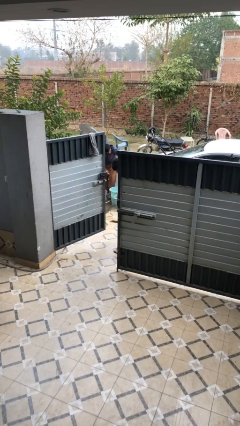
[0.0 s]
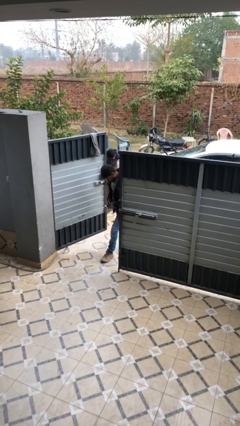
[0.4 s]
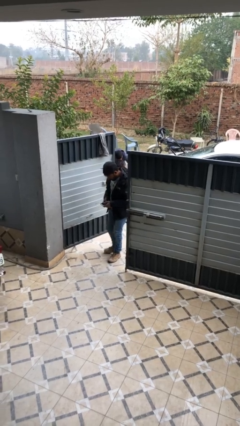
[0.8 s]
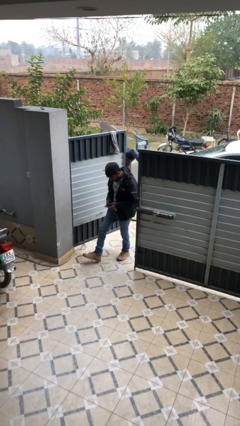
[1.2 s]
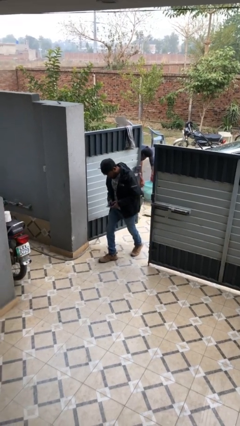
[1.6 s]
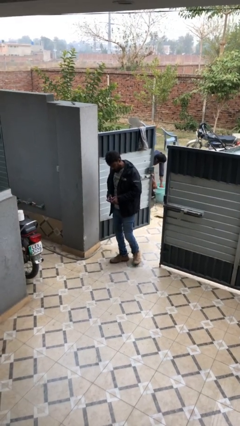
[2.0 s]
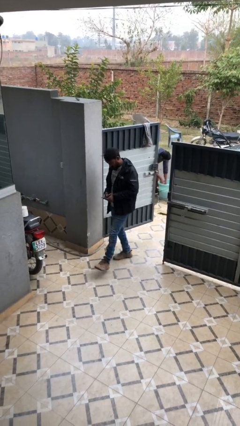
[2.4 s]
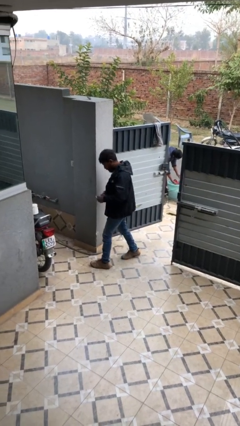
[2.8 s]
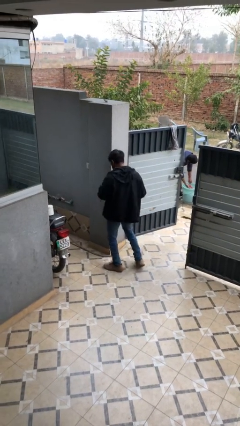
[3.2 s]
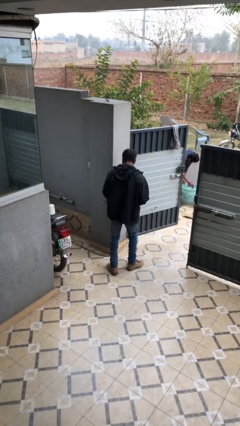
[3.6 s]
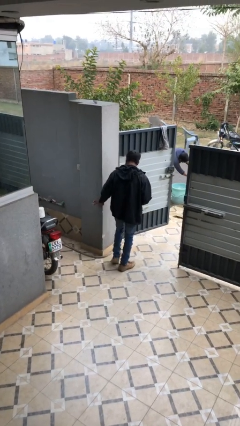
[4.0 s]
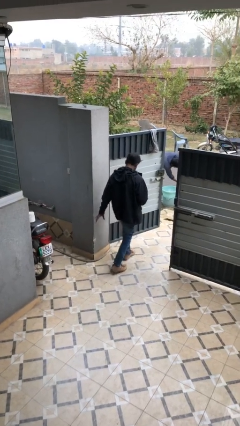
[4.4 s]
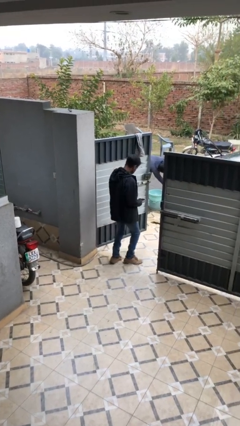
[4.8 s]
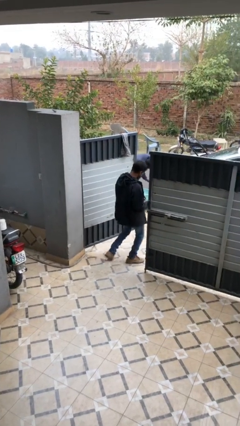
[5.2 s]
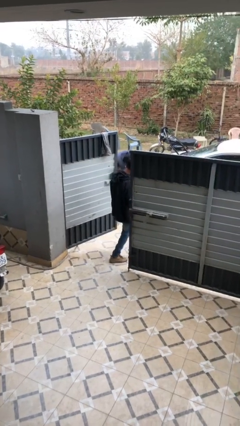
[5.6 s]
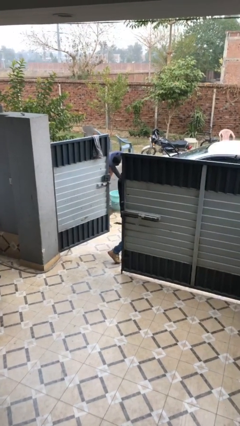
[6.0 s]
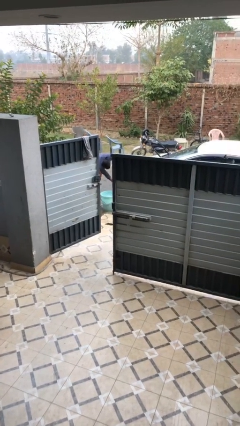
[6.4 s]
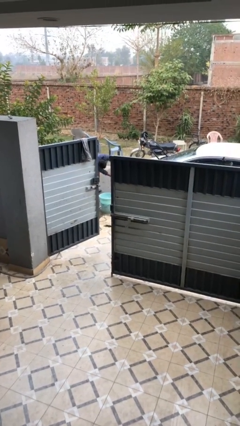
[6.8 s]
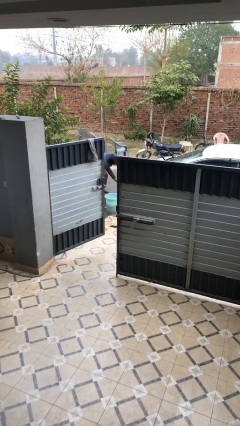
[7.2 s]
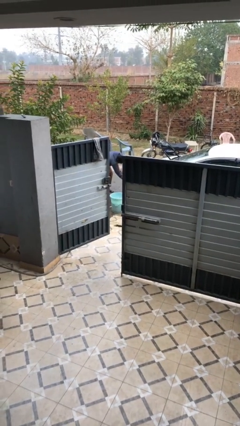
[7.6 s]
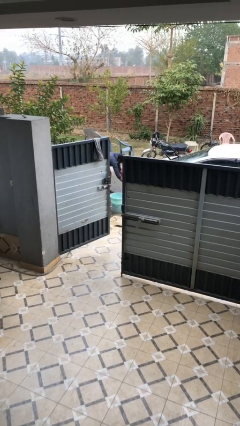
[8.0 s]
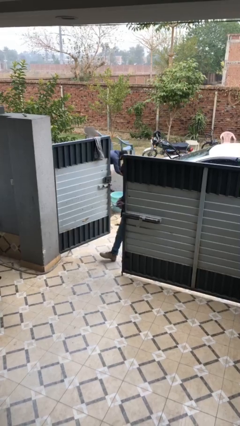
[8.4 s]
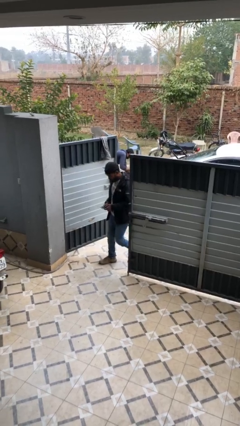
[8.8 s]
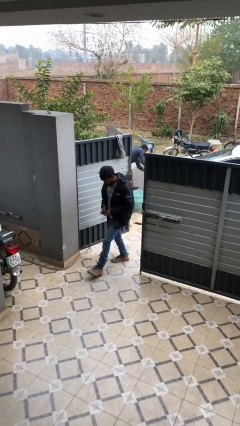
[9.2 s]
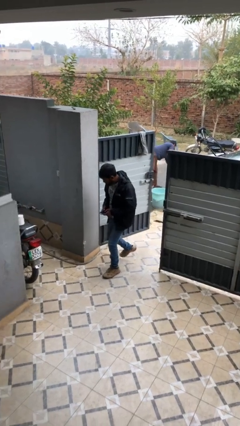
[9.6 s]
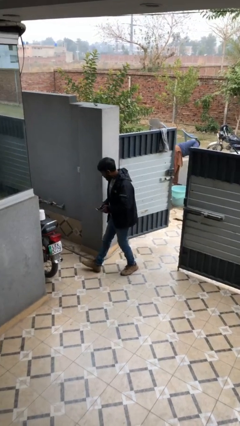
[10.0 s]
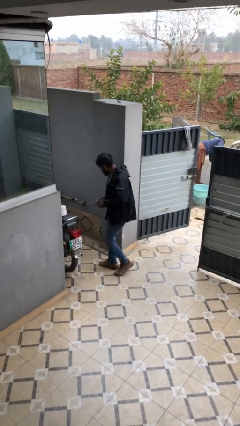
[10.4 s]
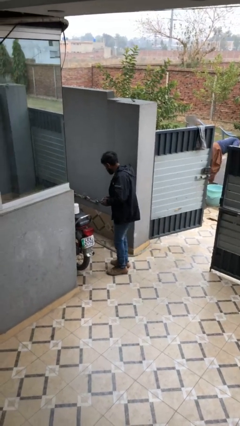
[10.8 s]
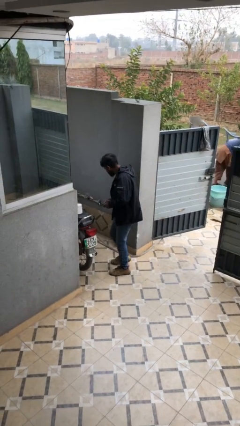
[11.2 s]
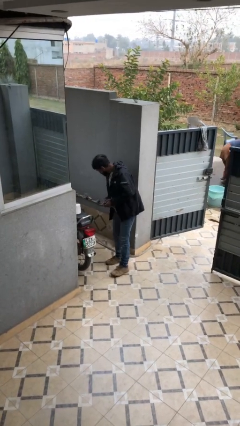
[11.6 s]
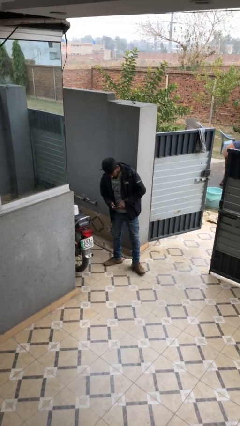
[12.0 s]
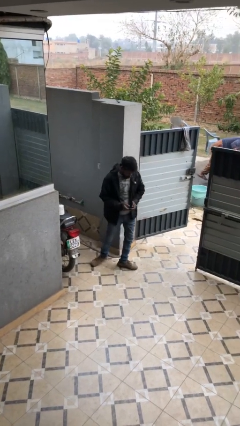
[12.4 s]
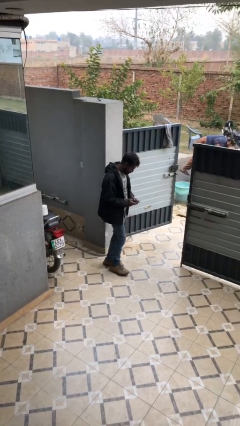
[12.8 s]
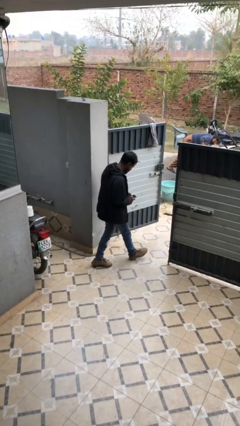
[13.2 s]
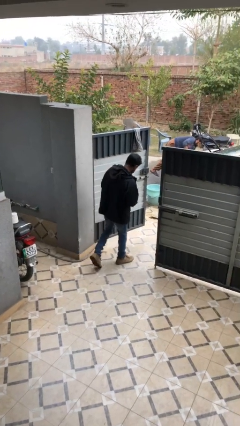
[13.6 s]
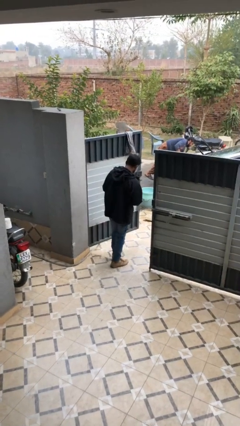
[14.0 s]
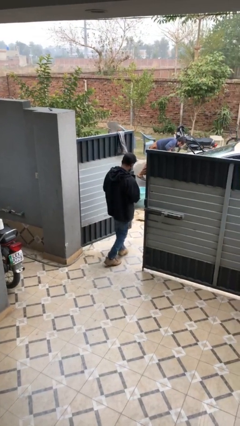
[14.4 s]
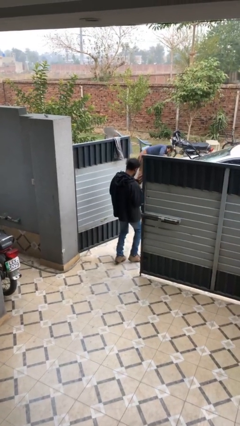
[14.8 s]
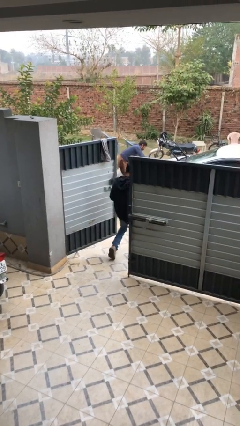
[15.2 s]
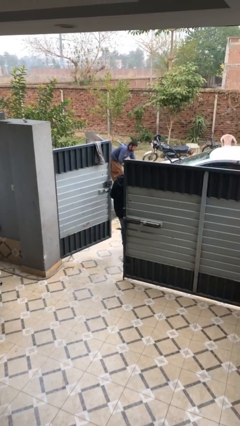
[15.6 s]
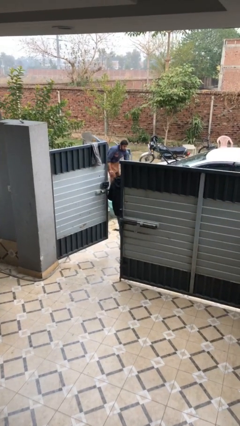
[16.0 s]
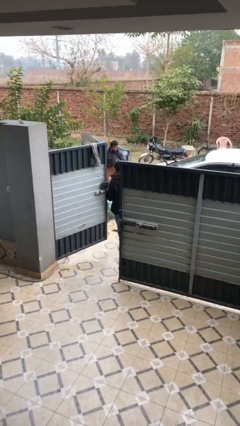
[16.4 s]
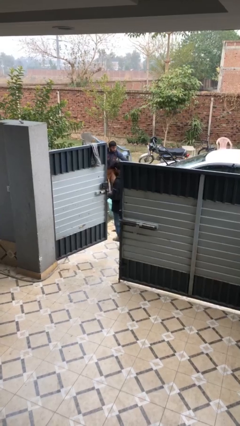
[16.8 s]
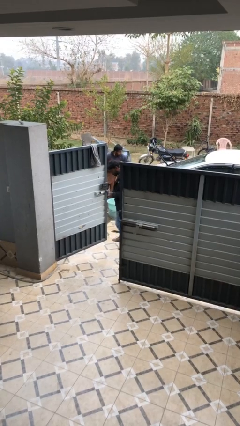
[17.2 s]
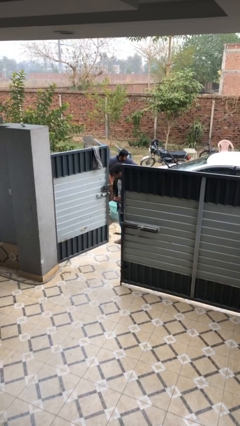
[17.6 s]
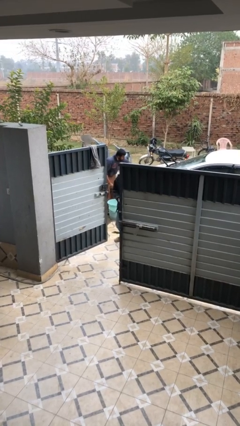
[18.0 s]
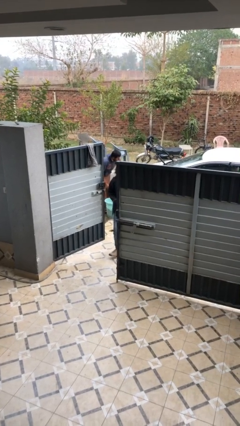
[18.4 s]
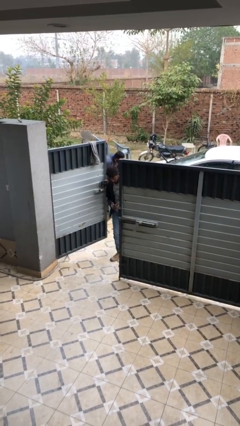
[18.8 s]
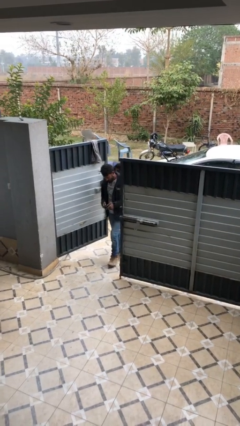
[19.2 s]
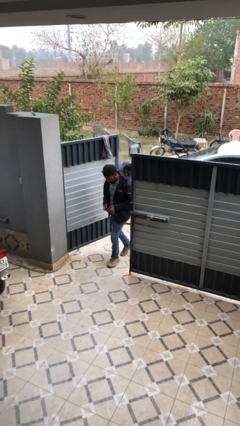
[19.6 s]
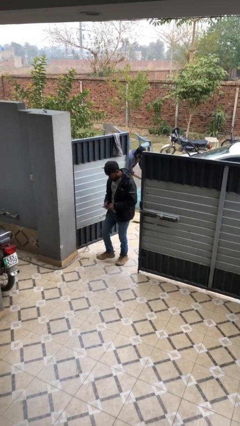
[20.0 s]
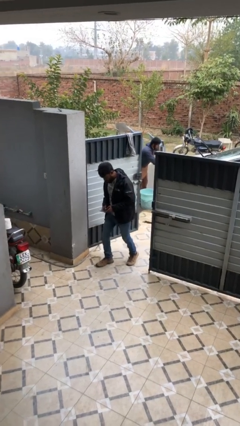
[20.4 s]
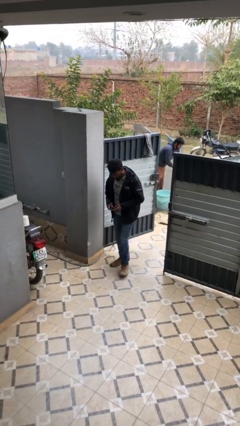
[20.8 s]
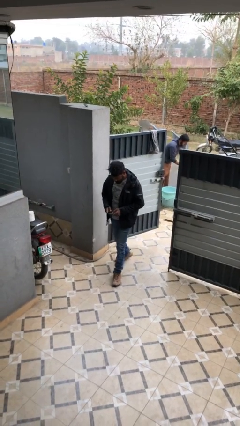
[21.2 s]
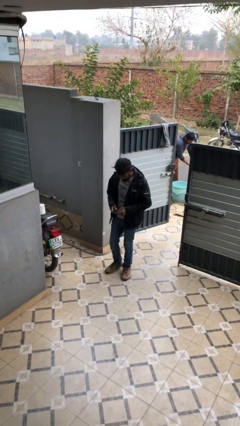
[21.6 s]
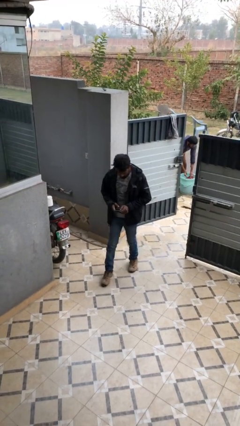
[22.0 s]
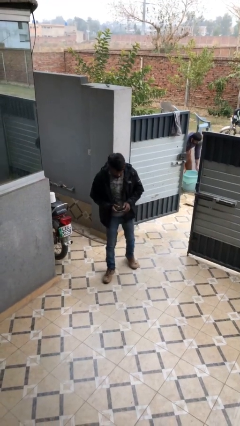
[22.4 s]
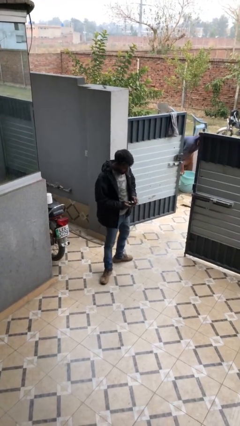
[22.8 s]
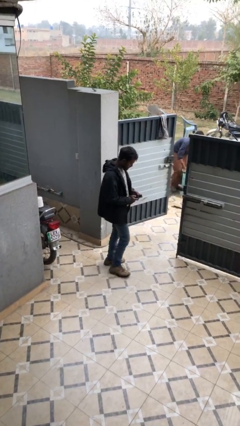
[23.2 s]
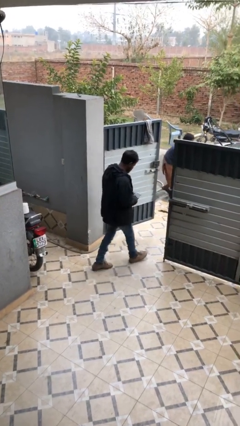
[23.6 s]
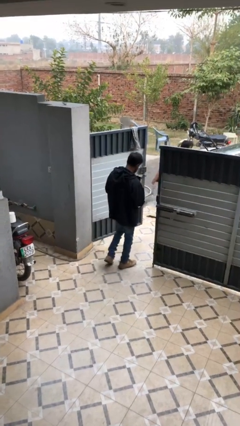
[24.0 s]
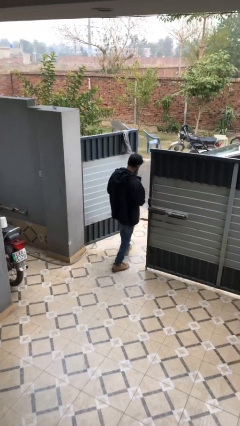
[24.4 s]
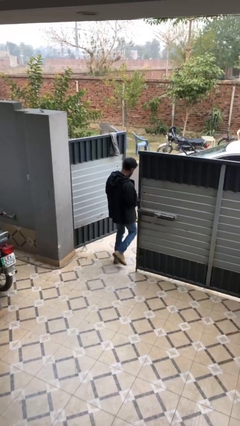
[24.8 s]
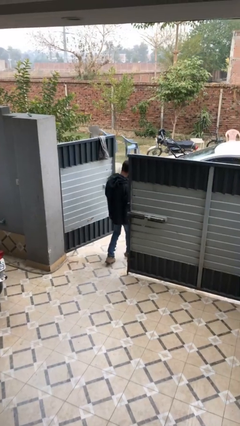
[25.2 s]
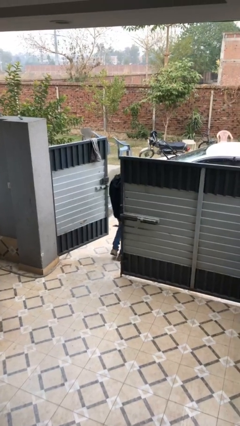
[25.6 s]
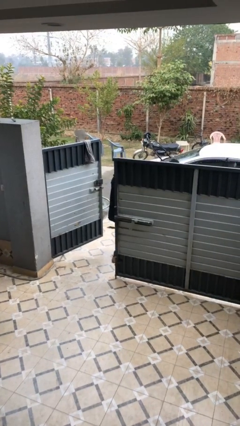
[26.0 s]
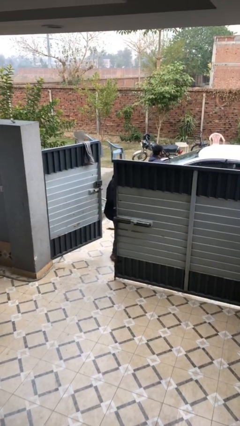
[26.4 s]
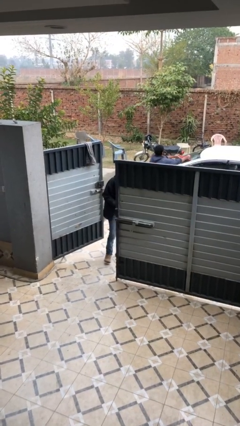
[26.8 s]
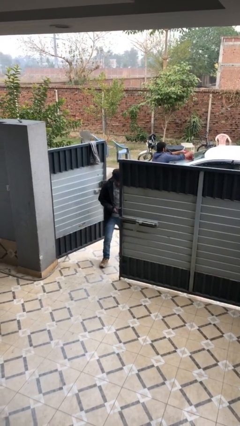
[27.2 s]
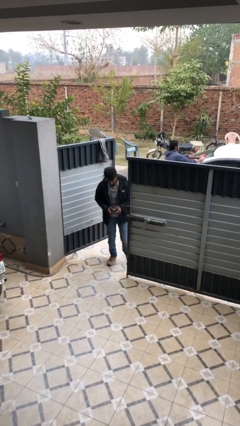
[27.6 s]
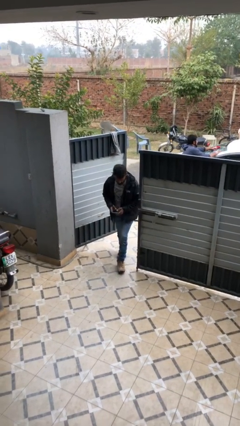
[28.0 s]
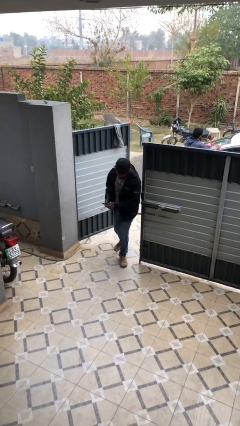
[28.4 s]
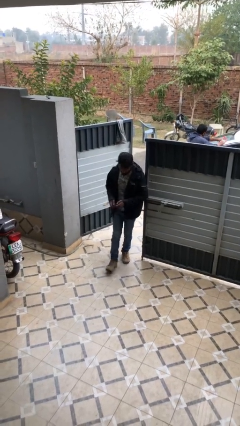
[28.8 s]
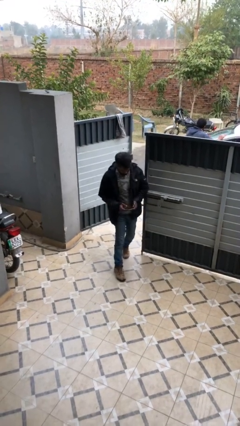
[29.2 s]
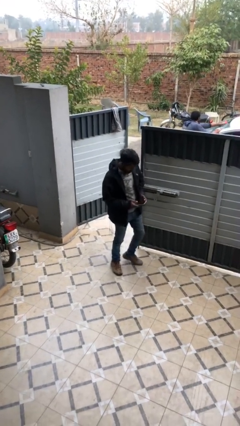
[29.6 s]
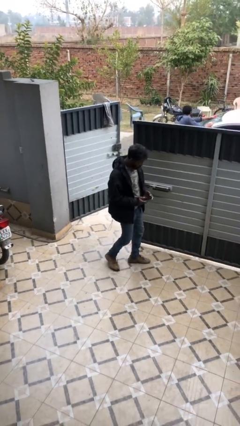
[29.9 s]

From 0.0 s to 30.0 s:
person texts on phone

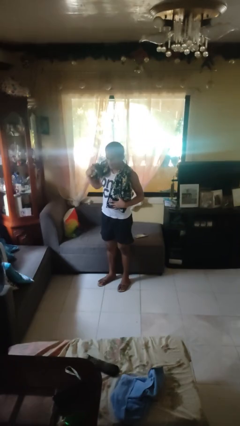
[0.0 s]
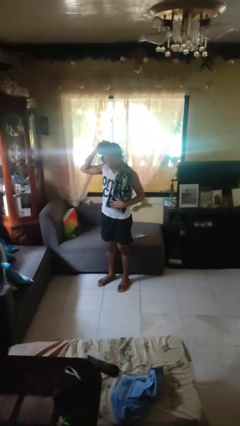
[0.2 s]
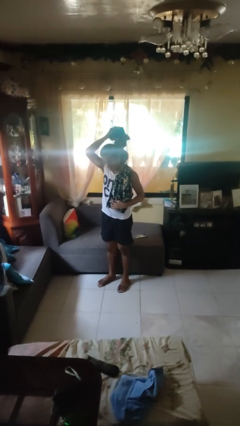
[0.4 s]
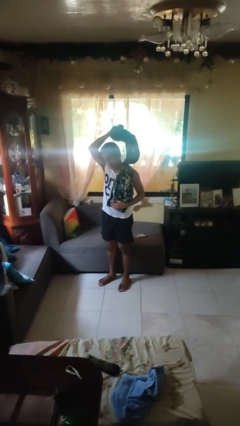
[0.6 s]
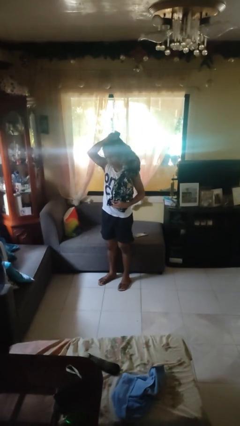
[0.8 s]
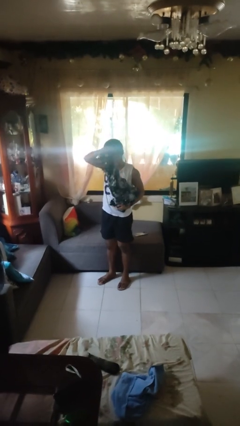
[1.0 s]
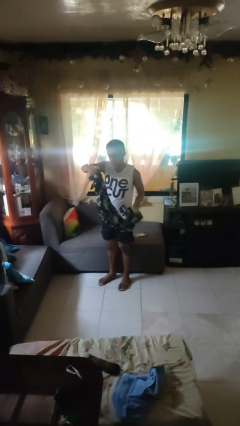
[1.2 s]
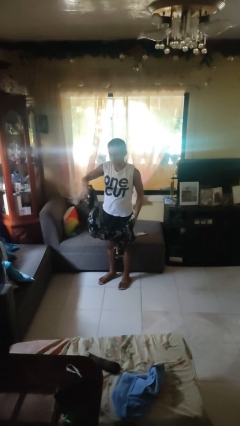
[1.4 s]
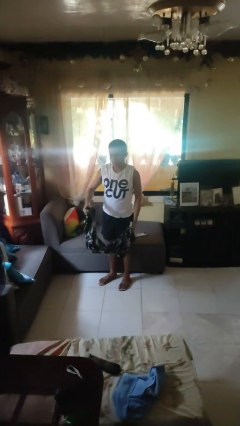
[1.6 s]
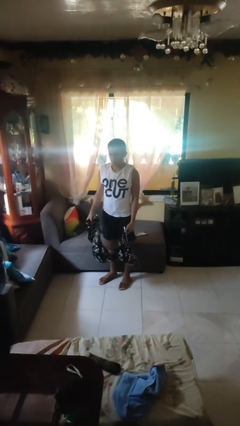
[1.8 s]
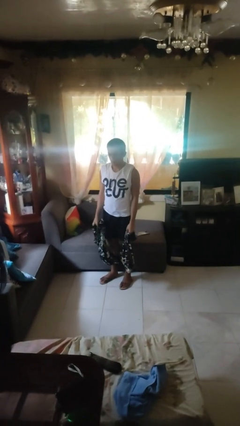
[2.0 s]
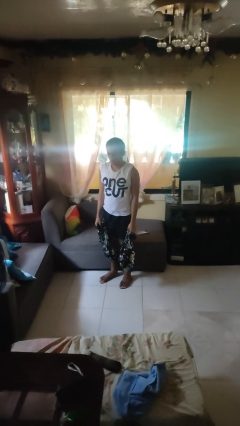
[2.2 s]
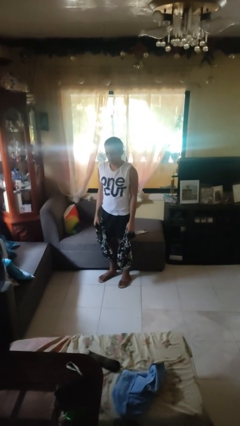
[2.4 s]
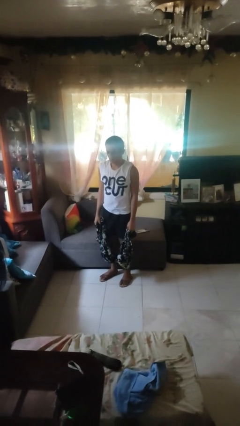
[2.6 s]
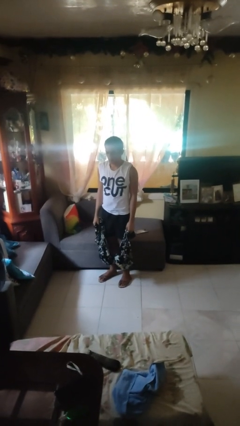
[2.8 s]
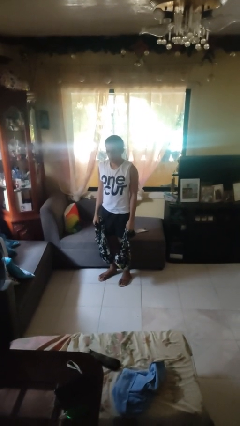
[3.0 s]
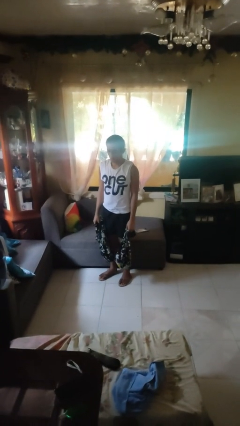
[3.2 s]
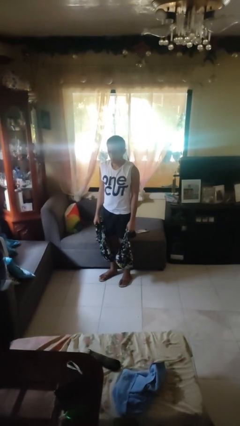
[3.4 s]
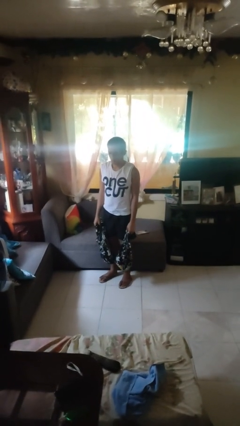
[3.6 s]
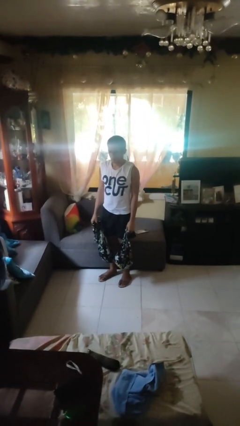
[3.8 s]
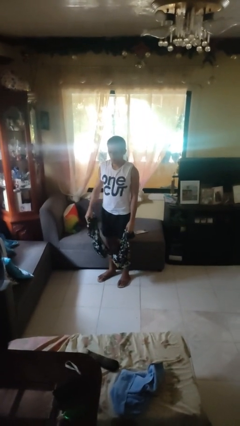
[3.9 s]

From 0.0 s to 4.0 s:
person takes off scarf
